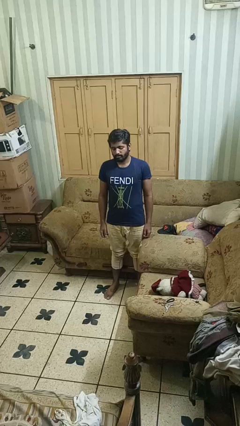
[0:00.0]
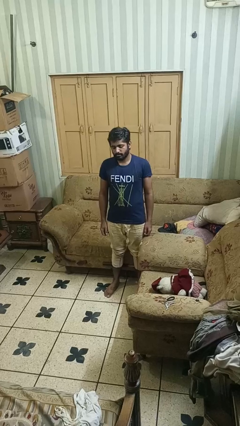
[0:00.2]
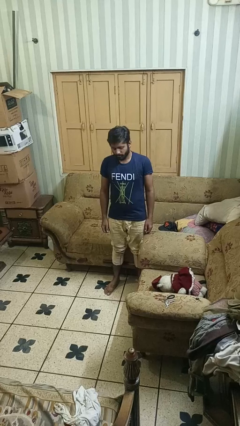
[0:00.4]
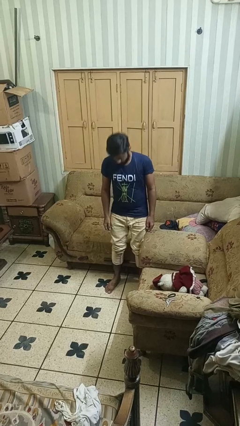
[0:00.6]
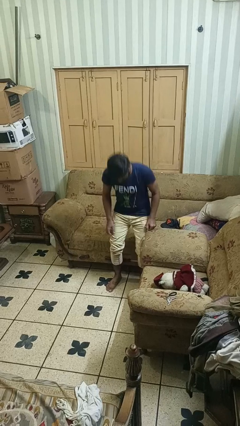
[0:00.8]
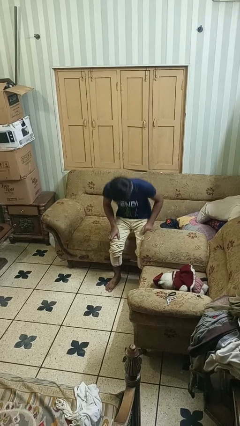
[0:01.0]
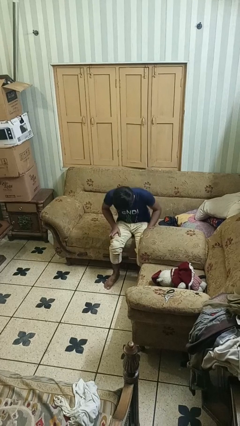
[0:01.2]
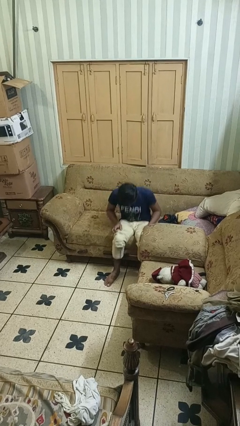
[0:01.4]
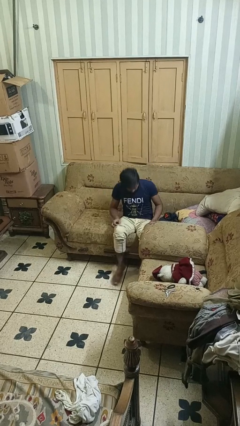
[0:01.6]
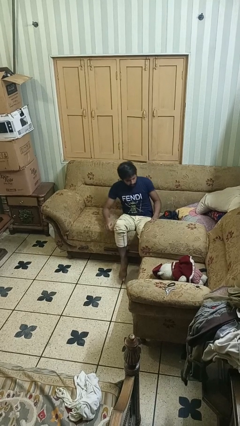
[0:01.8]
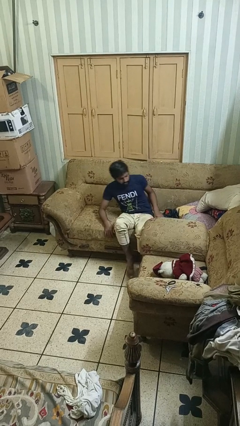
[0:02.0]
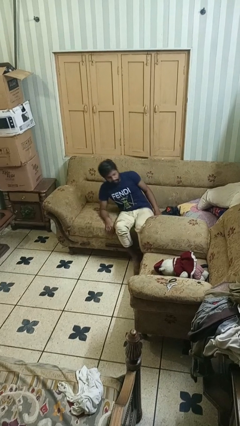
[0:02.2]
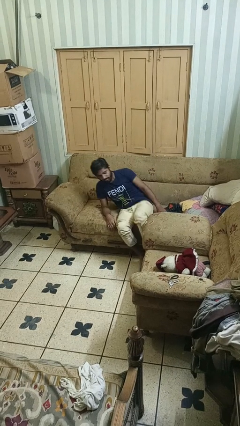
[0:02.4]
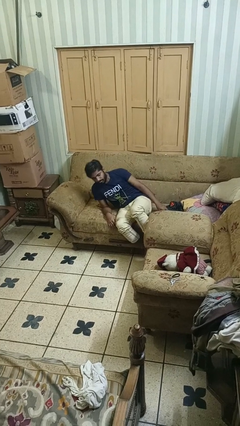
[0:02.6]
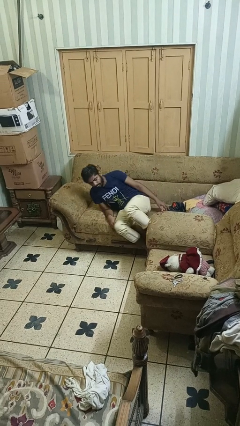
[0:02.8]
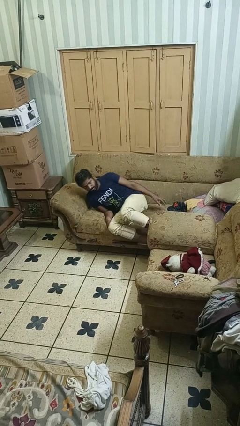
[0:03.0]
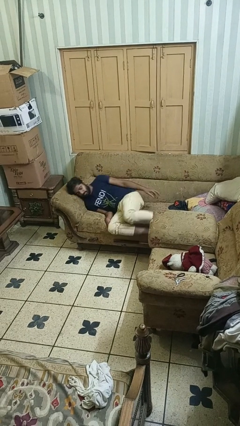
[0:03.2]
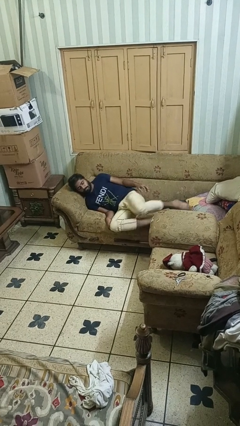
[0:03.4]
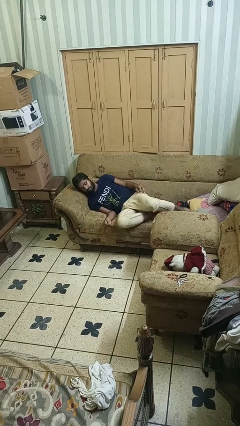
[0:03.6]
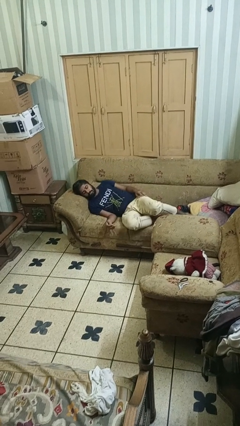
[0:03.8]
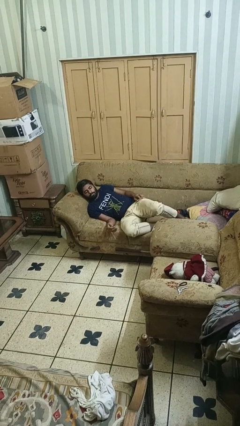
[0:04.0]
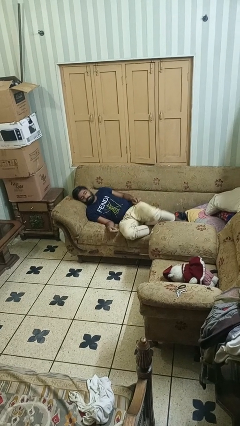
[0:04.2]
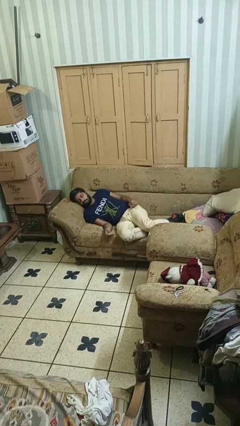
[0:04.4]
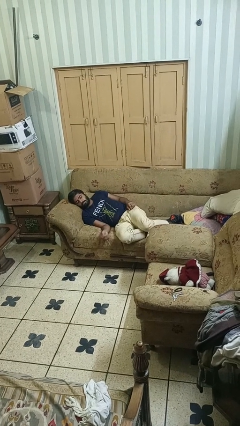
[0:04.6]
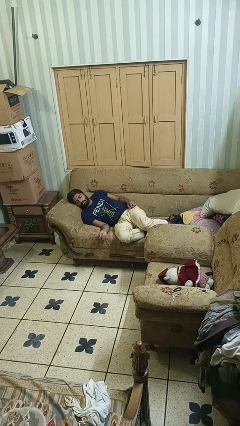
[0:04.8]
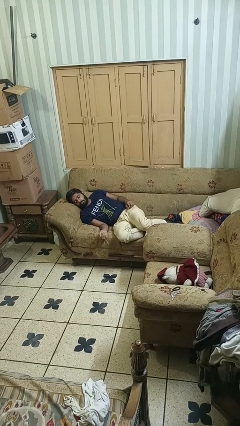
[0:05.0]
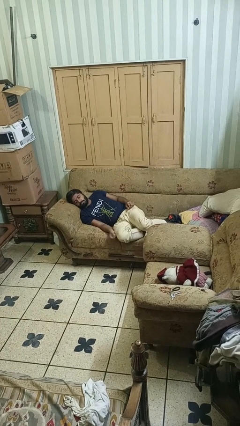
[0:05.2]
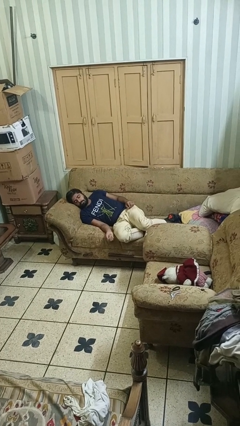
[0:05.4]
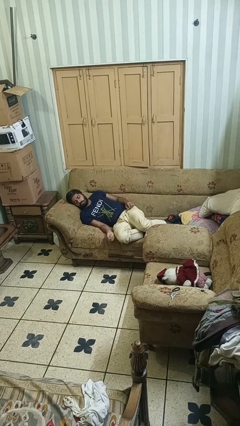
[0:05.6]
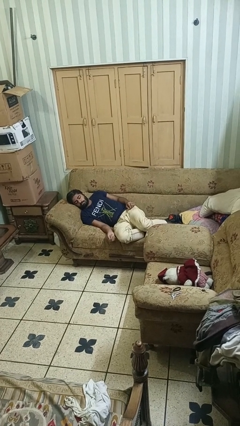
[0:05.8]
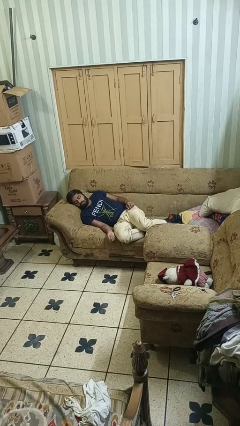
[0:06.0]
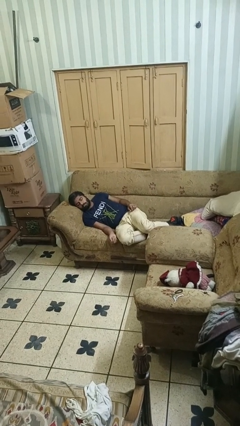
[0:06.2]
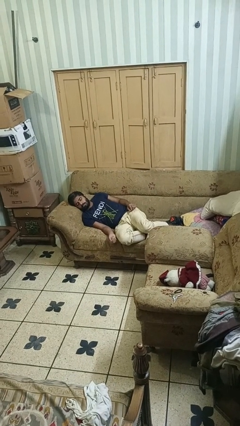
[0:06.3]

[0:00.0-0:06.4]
person lies down on couch

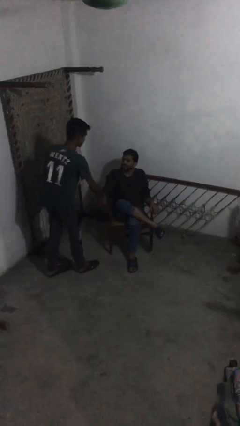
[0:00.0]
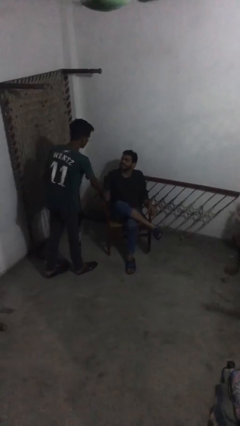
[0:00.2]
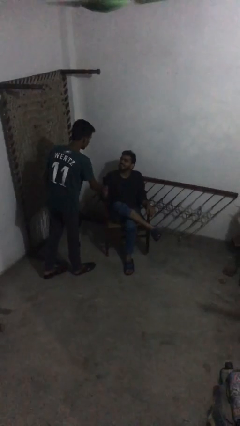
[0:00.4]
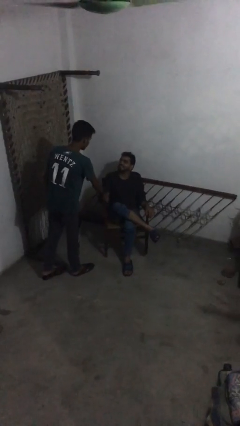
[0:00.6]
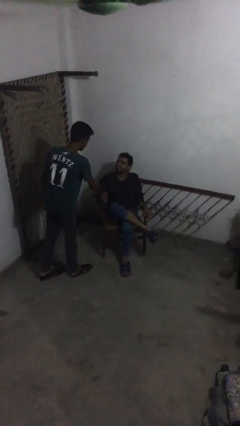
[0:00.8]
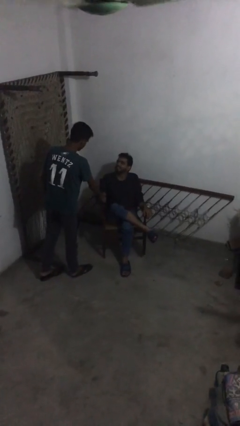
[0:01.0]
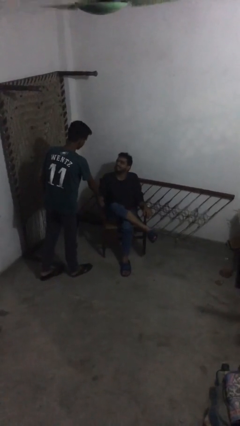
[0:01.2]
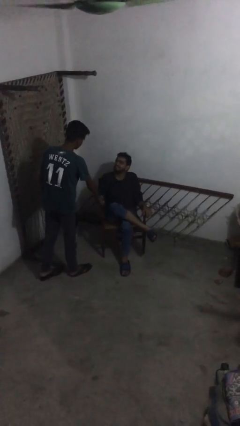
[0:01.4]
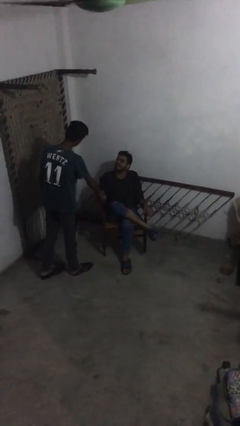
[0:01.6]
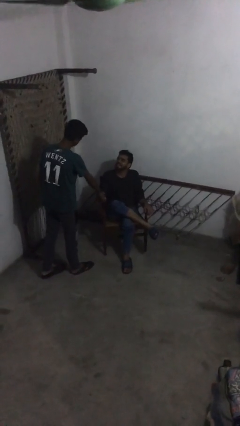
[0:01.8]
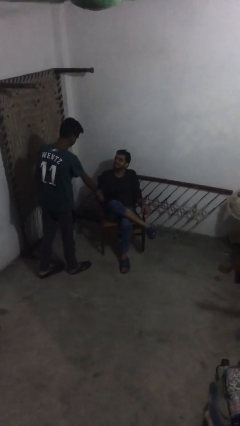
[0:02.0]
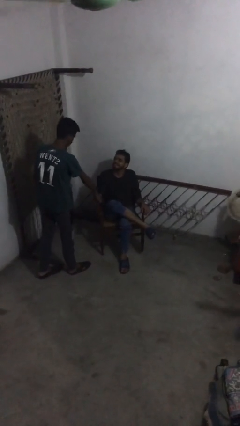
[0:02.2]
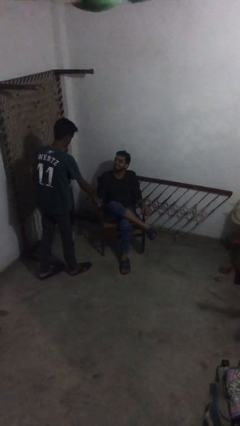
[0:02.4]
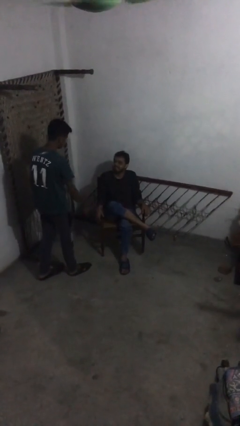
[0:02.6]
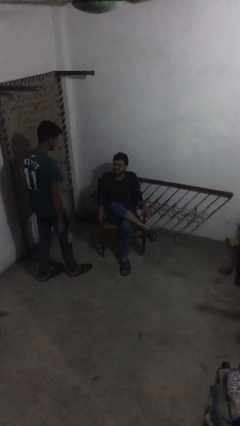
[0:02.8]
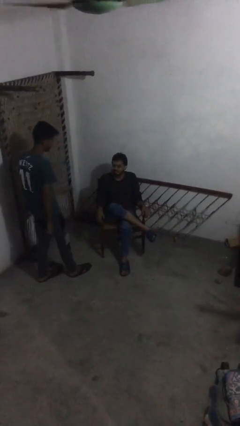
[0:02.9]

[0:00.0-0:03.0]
person shakes hand

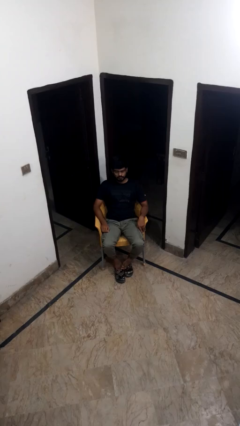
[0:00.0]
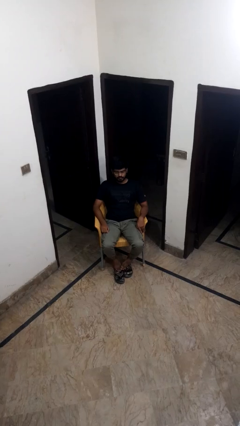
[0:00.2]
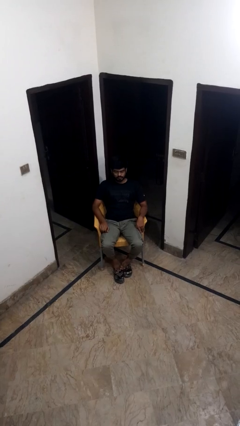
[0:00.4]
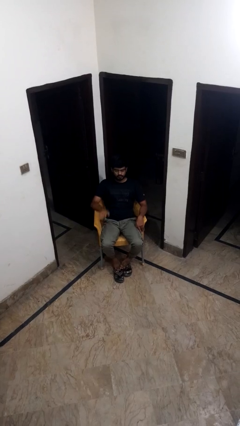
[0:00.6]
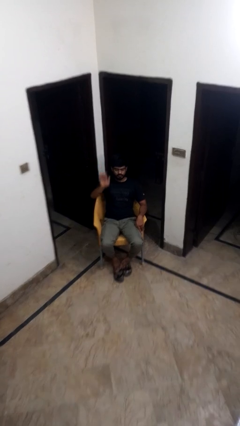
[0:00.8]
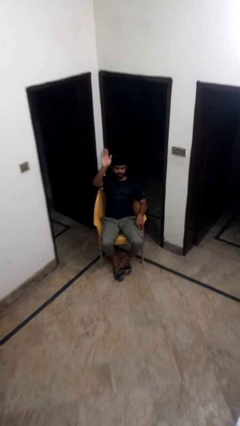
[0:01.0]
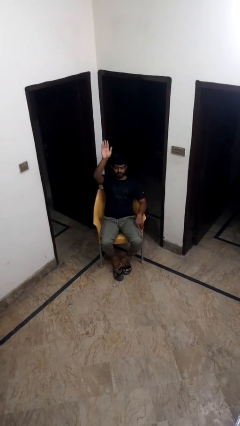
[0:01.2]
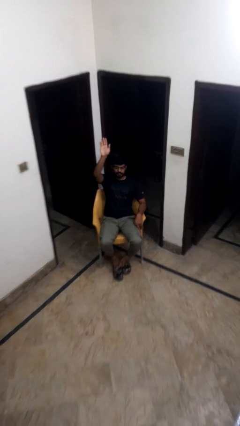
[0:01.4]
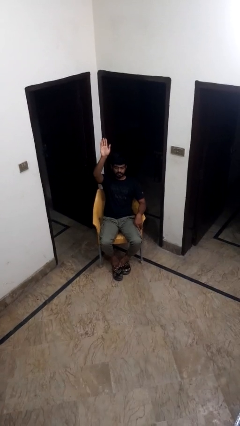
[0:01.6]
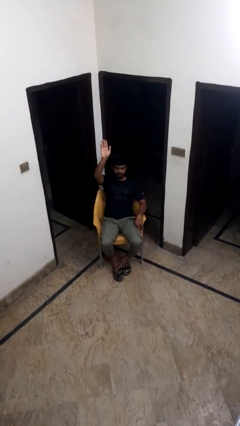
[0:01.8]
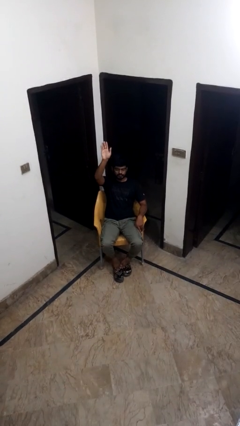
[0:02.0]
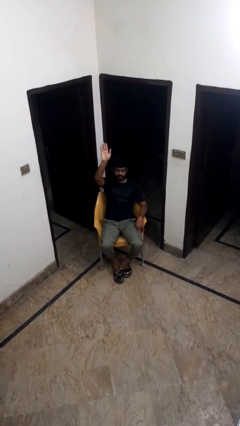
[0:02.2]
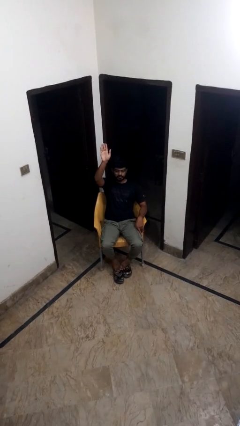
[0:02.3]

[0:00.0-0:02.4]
person gestures raise hand

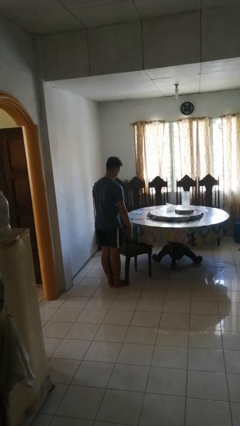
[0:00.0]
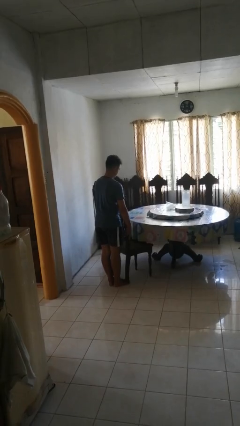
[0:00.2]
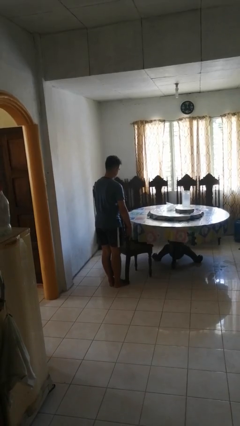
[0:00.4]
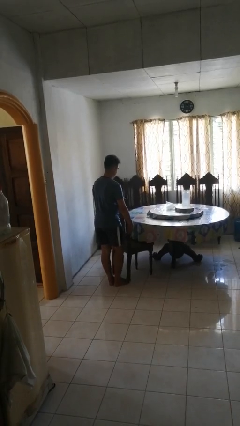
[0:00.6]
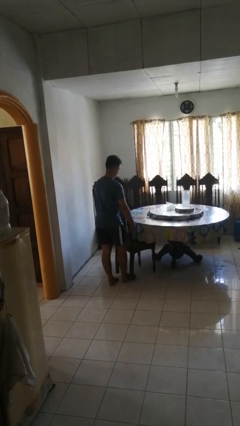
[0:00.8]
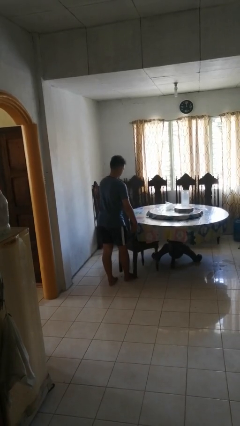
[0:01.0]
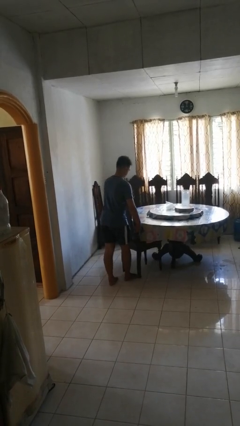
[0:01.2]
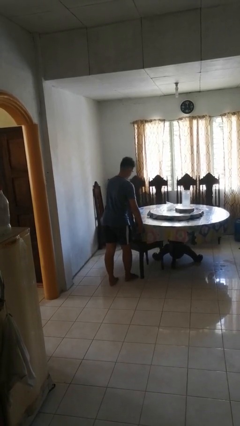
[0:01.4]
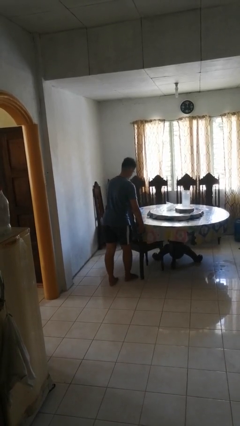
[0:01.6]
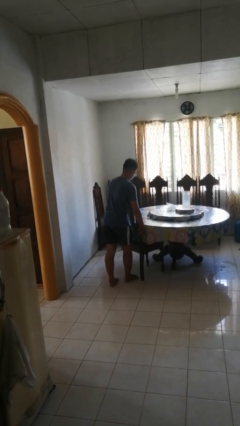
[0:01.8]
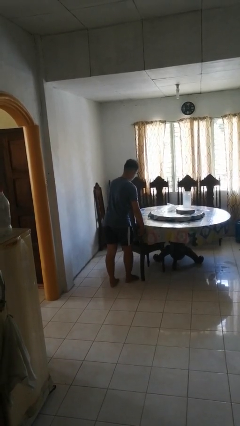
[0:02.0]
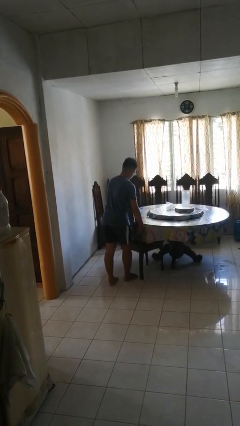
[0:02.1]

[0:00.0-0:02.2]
person pushes in chair

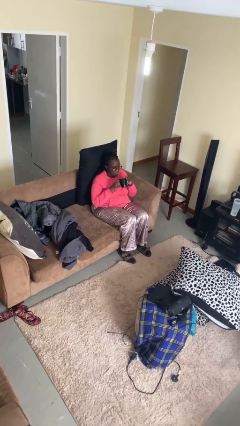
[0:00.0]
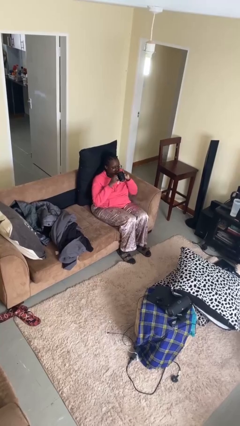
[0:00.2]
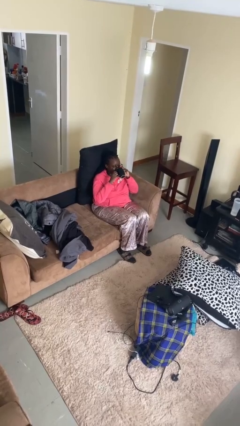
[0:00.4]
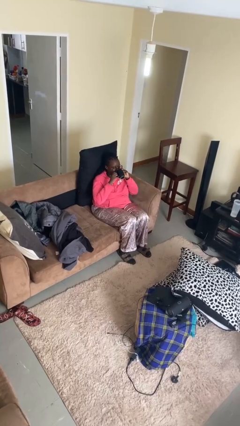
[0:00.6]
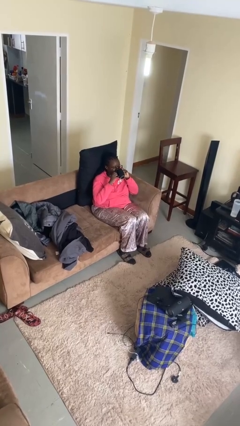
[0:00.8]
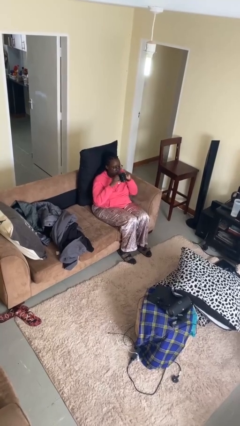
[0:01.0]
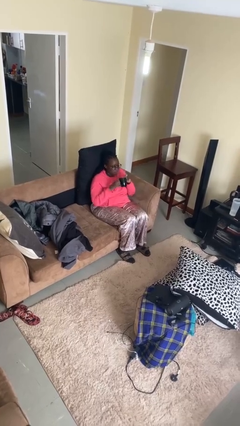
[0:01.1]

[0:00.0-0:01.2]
person drinks from mug

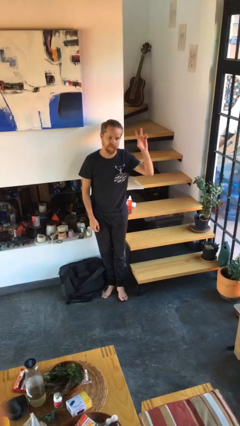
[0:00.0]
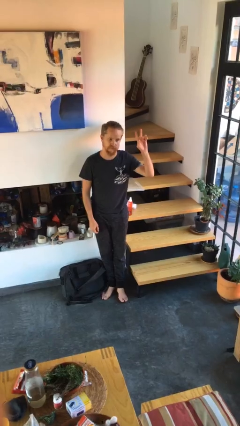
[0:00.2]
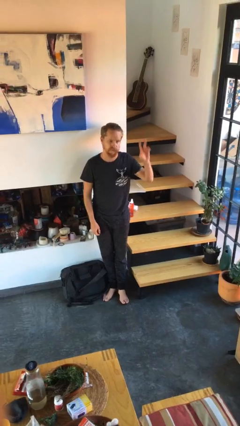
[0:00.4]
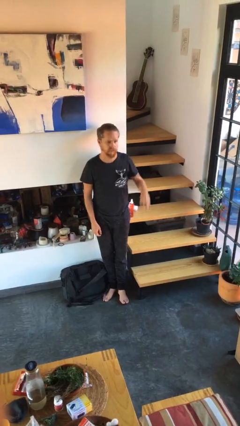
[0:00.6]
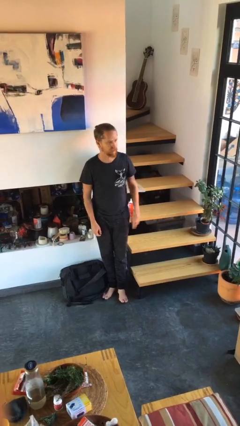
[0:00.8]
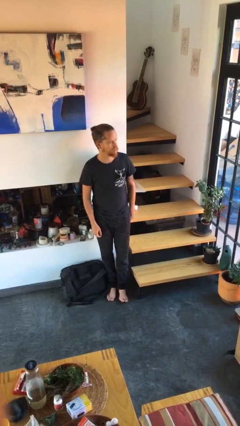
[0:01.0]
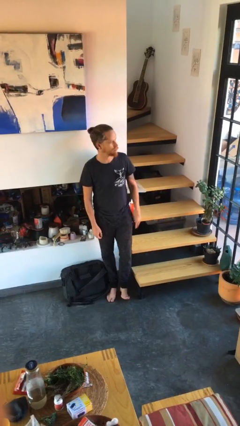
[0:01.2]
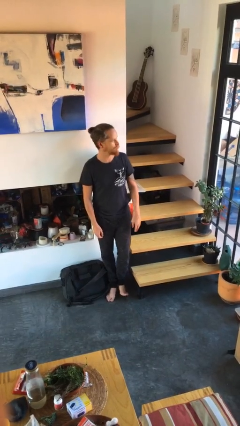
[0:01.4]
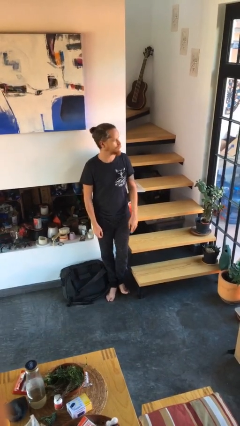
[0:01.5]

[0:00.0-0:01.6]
person gestures lower hand

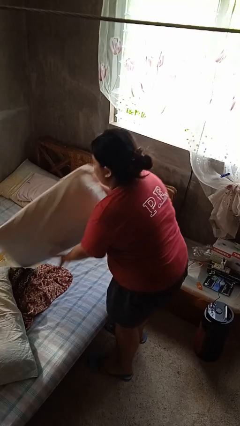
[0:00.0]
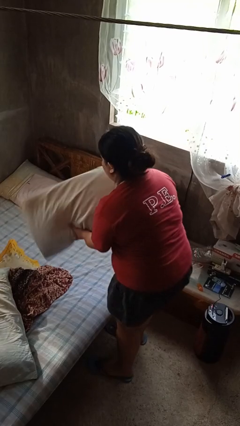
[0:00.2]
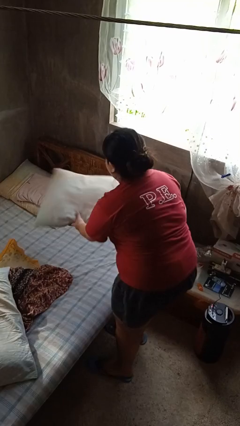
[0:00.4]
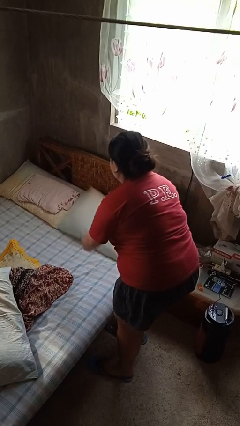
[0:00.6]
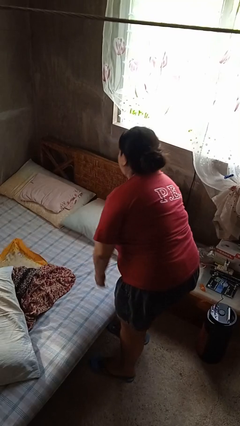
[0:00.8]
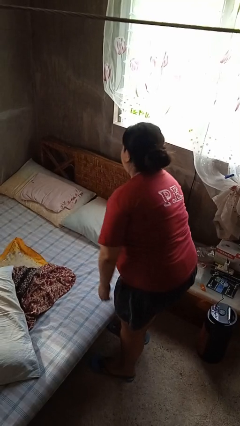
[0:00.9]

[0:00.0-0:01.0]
person makes bed
